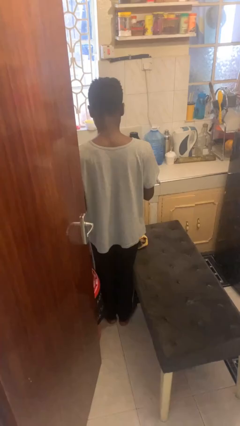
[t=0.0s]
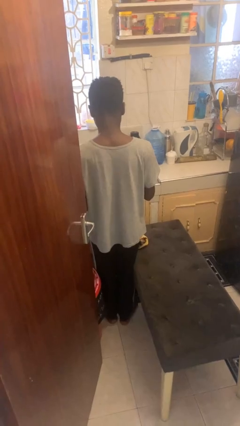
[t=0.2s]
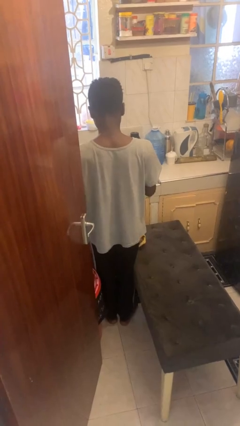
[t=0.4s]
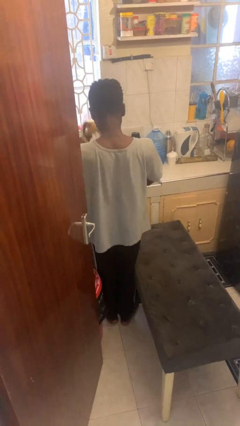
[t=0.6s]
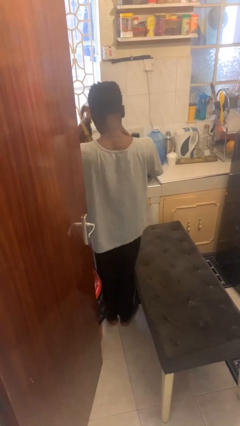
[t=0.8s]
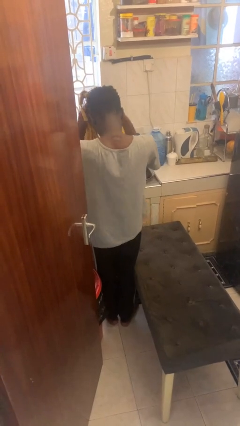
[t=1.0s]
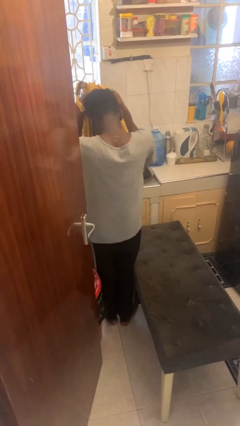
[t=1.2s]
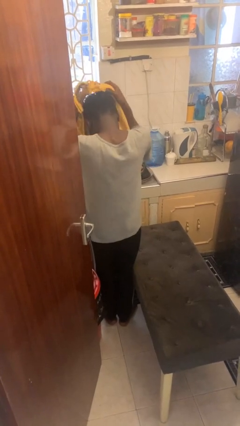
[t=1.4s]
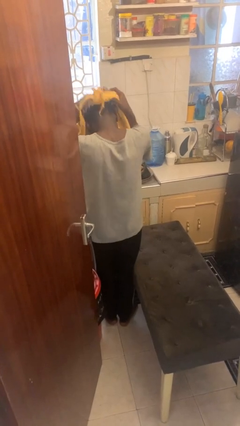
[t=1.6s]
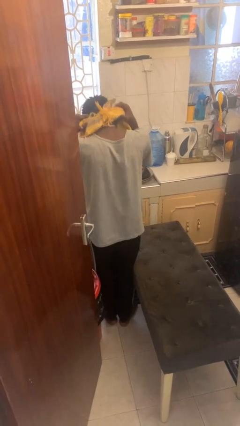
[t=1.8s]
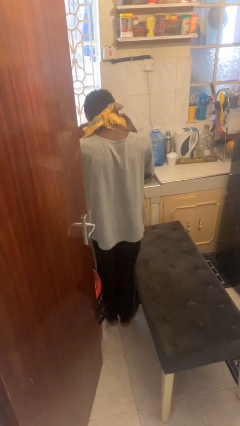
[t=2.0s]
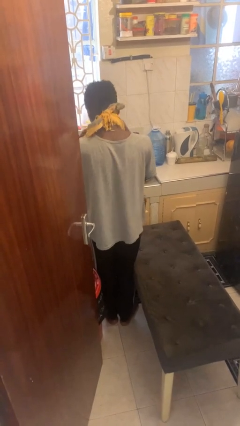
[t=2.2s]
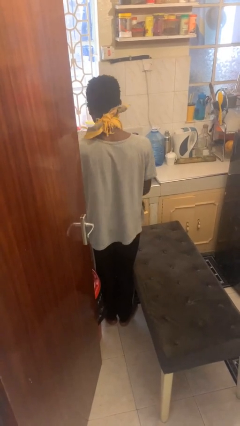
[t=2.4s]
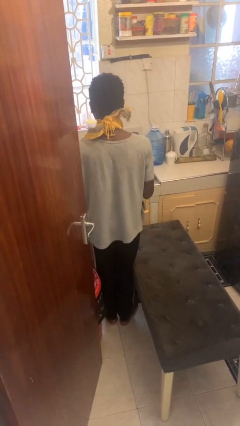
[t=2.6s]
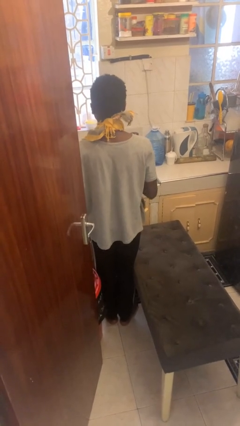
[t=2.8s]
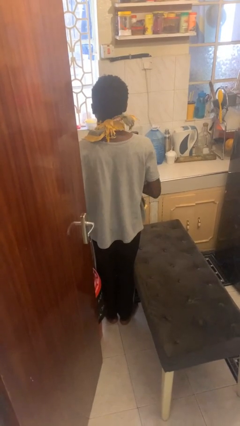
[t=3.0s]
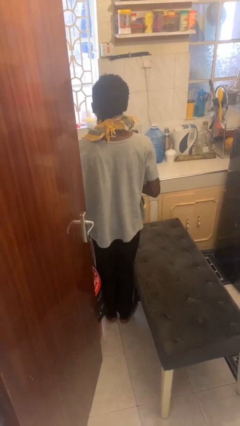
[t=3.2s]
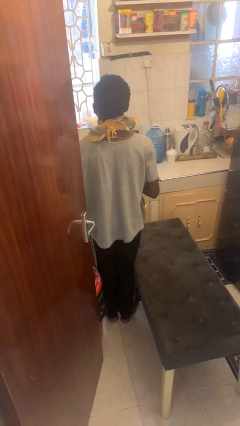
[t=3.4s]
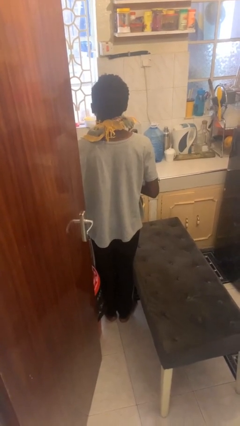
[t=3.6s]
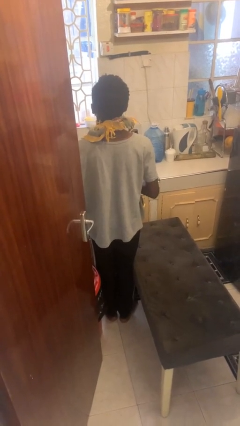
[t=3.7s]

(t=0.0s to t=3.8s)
person puts on apron

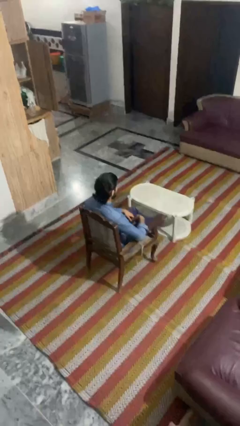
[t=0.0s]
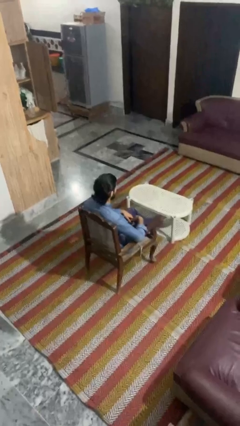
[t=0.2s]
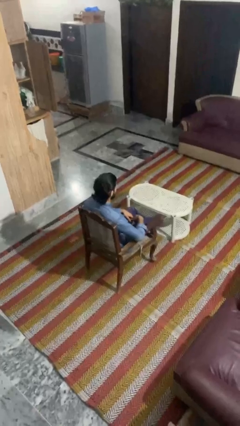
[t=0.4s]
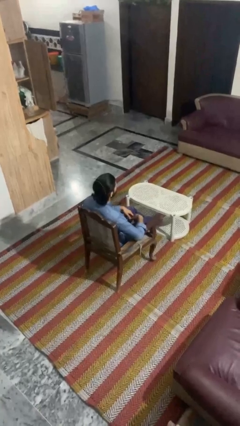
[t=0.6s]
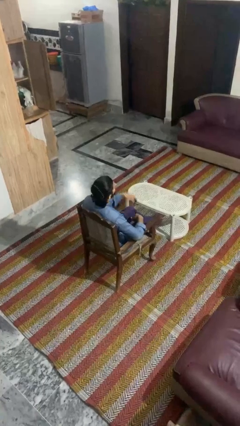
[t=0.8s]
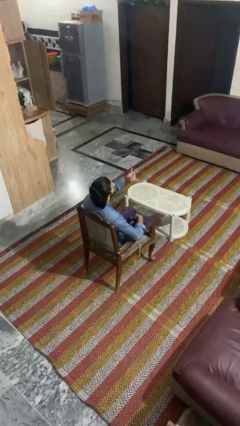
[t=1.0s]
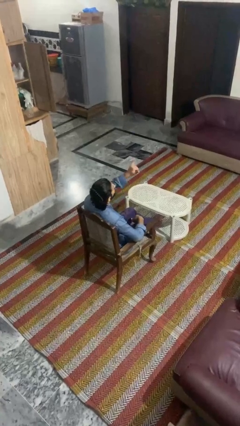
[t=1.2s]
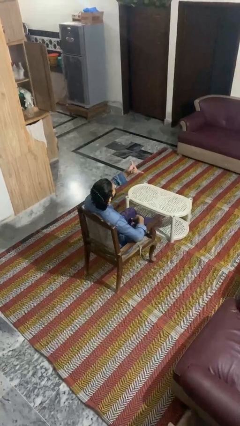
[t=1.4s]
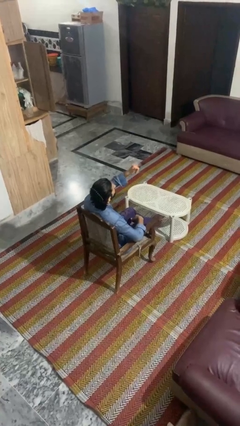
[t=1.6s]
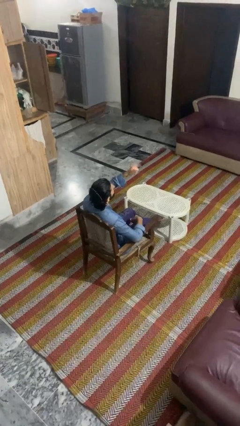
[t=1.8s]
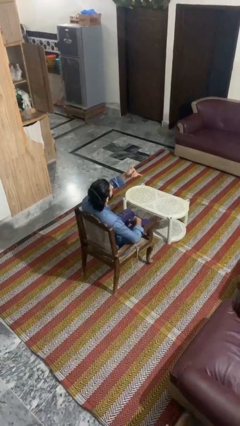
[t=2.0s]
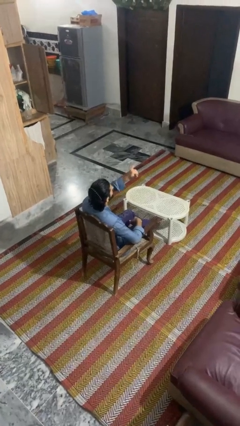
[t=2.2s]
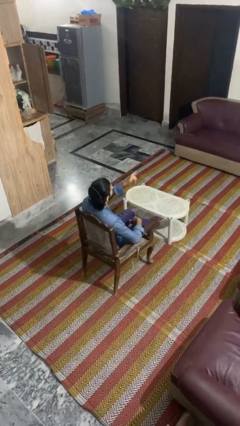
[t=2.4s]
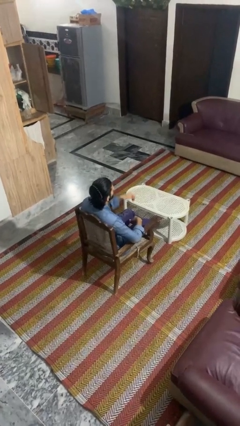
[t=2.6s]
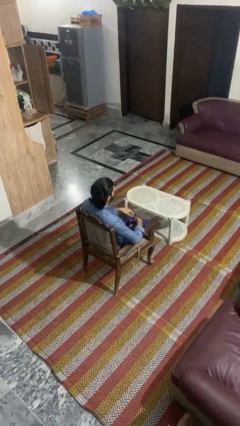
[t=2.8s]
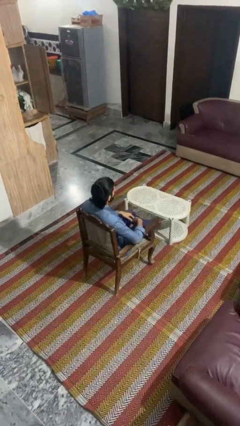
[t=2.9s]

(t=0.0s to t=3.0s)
person gestures hang loose

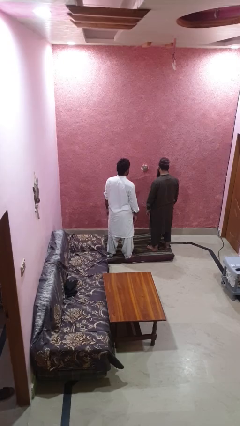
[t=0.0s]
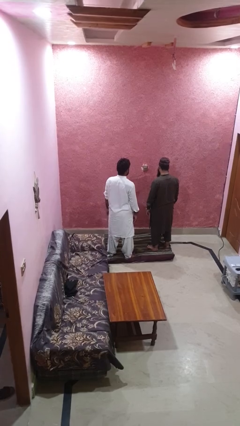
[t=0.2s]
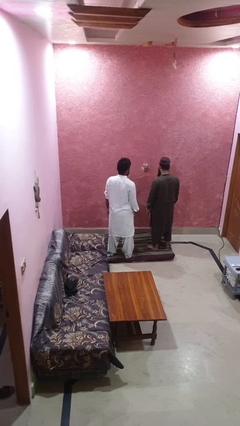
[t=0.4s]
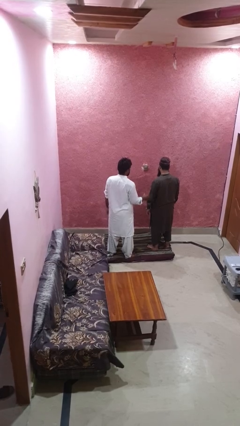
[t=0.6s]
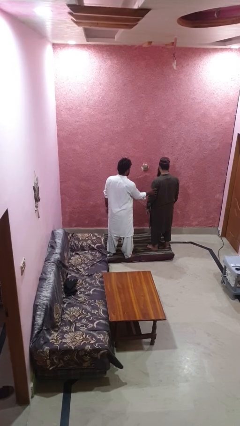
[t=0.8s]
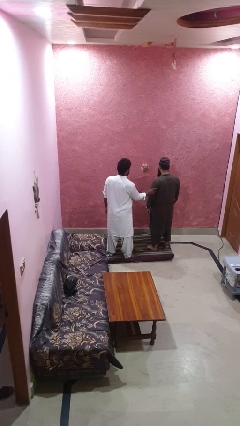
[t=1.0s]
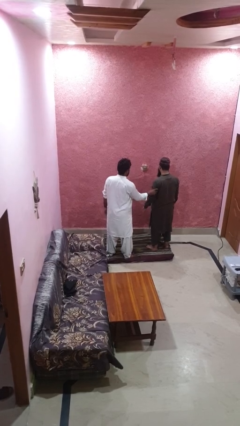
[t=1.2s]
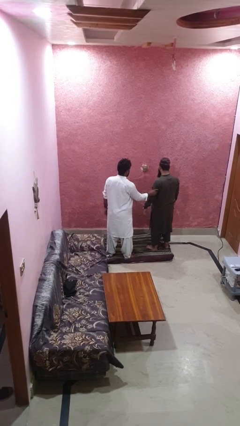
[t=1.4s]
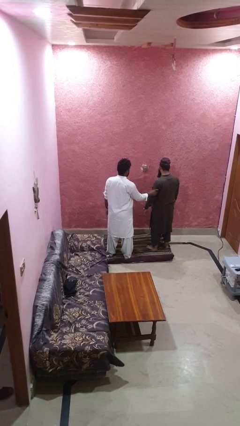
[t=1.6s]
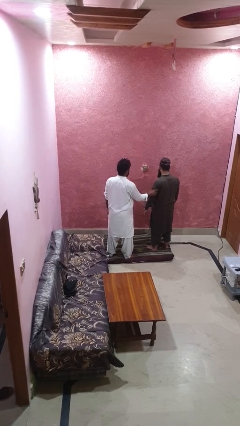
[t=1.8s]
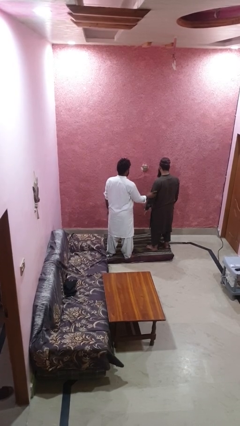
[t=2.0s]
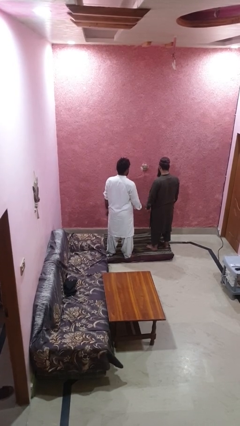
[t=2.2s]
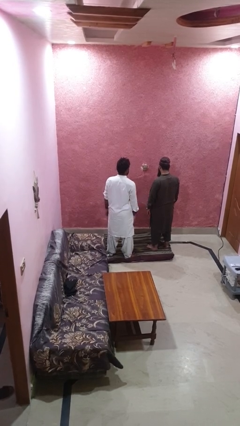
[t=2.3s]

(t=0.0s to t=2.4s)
person grabs person by bicep

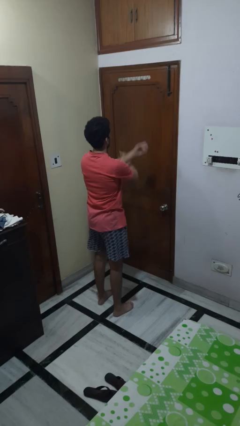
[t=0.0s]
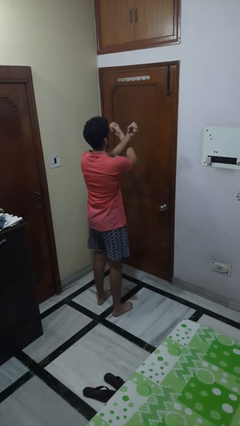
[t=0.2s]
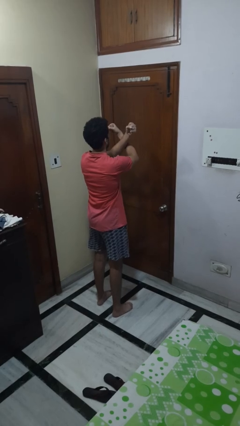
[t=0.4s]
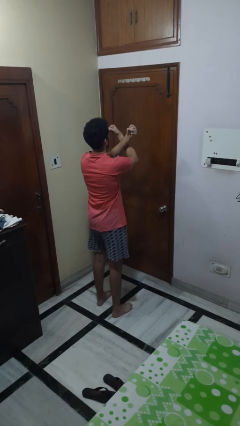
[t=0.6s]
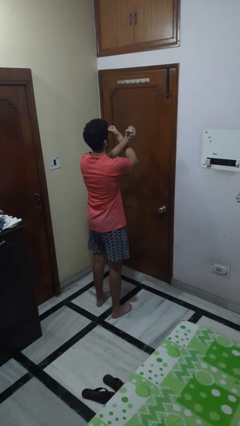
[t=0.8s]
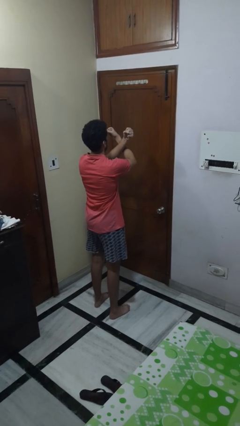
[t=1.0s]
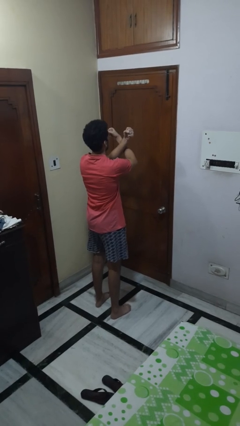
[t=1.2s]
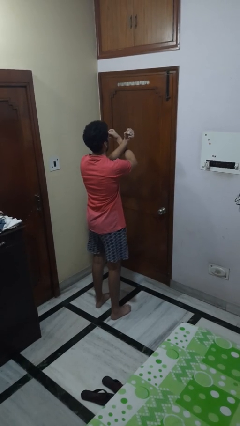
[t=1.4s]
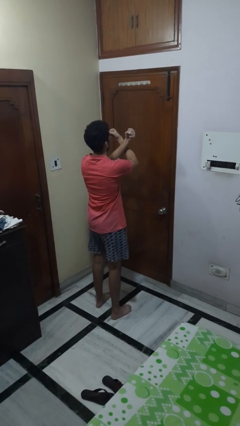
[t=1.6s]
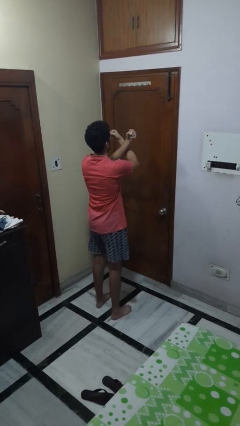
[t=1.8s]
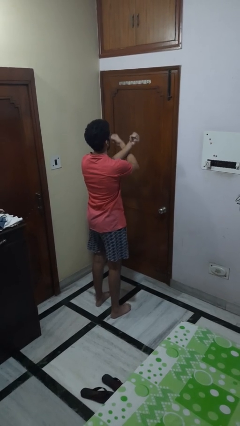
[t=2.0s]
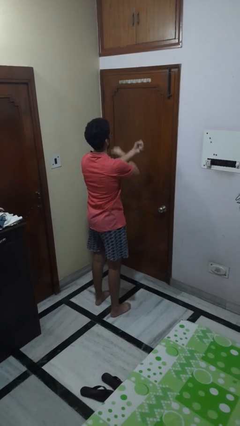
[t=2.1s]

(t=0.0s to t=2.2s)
person gestures arms x

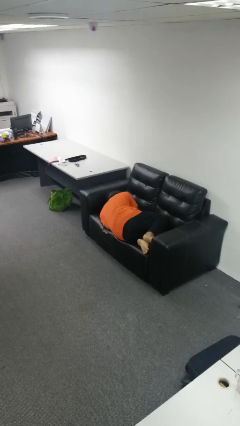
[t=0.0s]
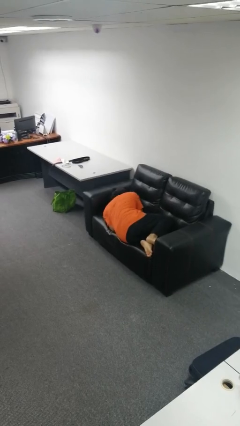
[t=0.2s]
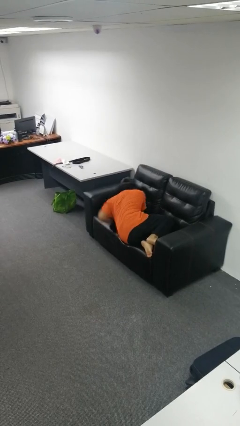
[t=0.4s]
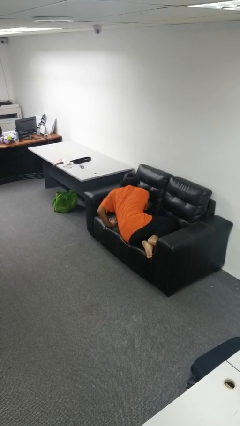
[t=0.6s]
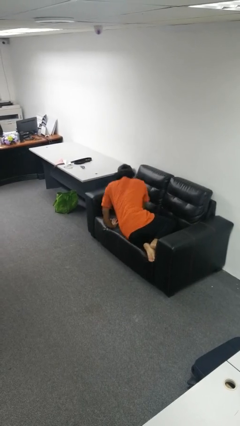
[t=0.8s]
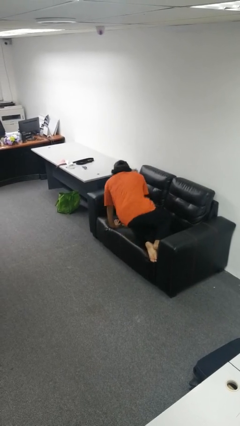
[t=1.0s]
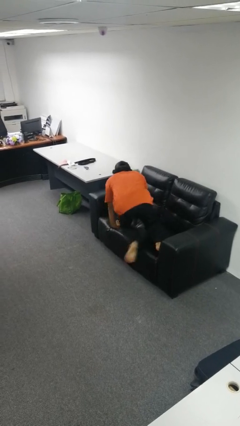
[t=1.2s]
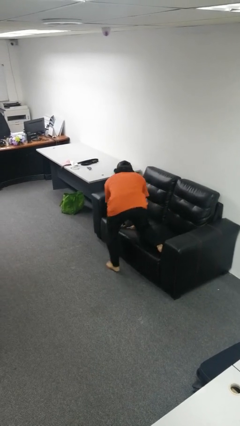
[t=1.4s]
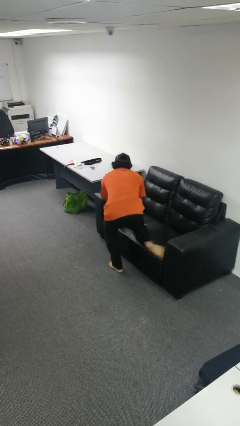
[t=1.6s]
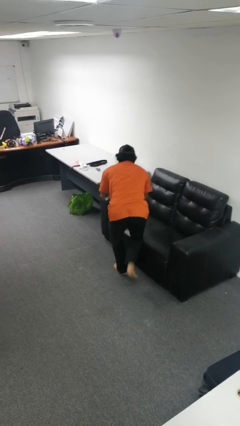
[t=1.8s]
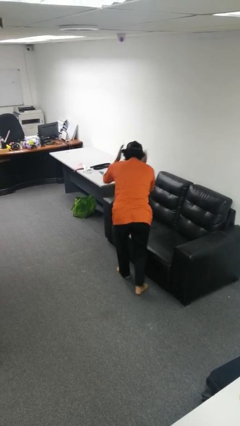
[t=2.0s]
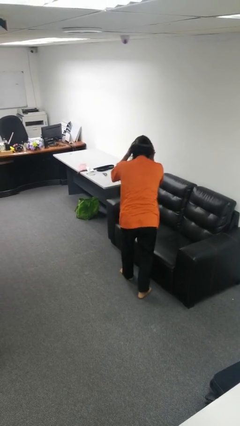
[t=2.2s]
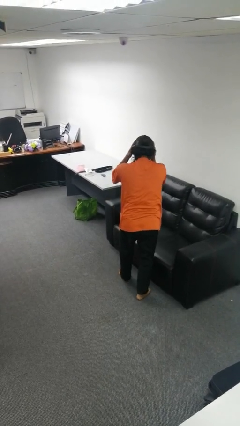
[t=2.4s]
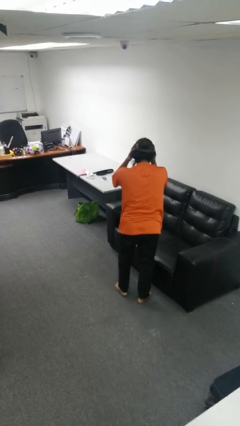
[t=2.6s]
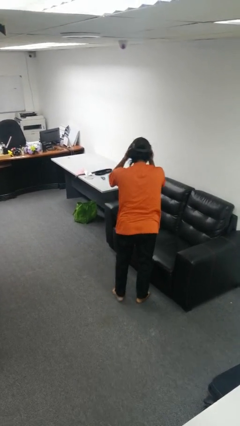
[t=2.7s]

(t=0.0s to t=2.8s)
person stands up

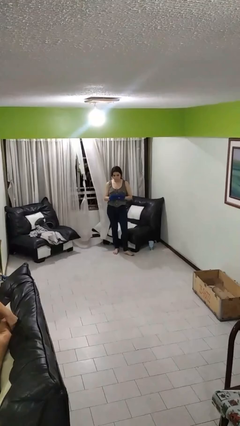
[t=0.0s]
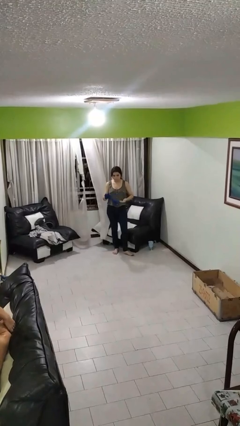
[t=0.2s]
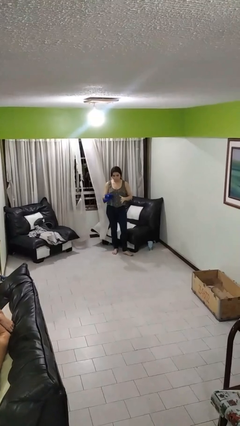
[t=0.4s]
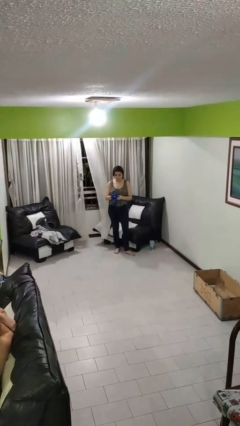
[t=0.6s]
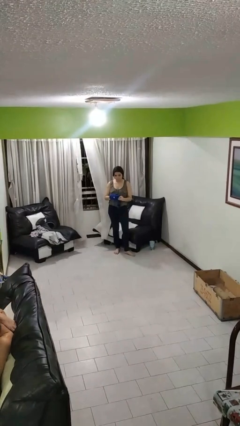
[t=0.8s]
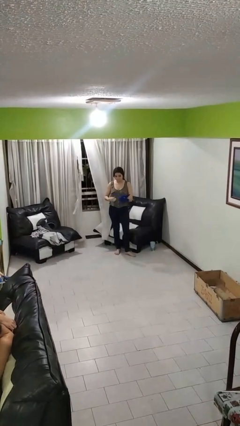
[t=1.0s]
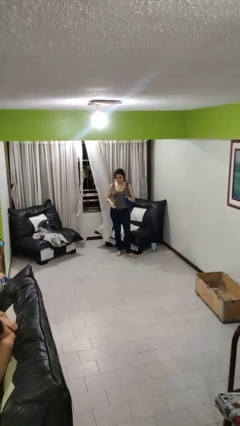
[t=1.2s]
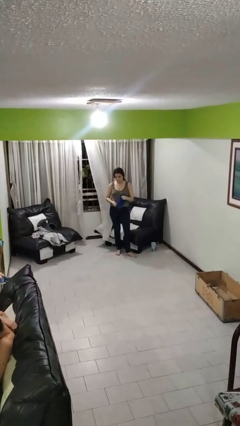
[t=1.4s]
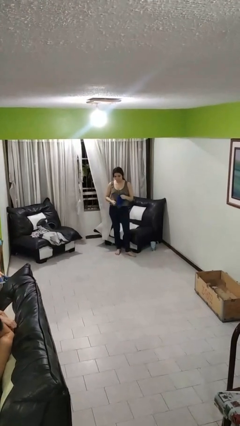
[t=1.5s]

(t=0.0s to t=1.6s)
person takes off gloves

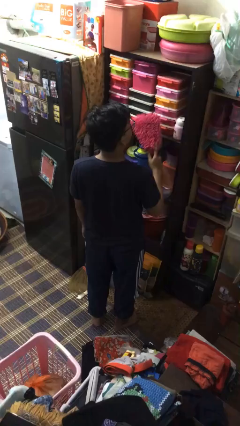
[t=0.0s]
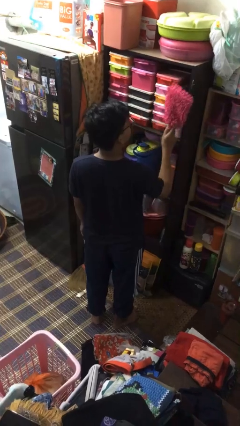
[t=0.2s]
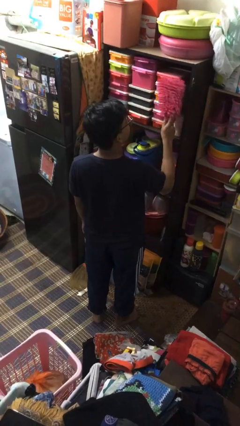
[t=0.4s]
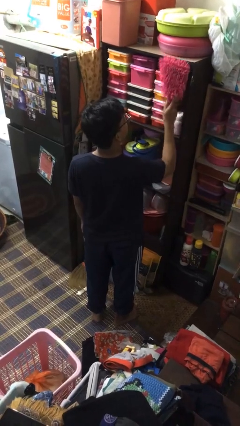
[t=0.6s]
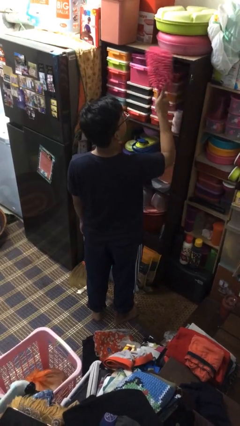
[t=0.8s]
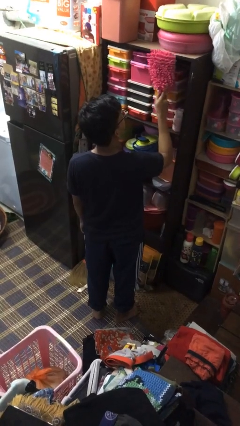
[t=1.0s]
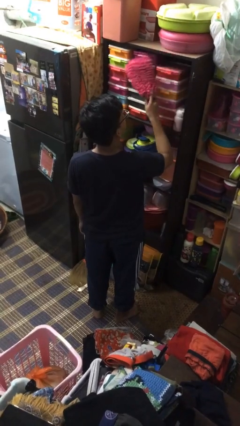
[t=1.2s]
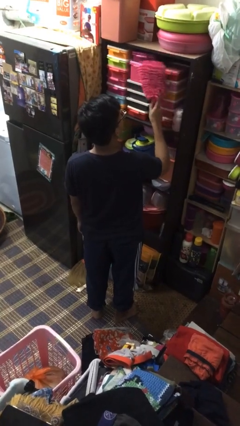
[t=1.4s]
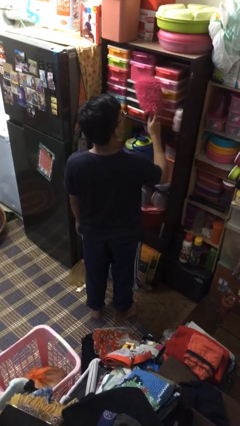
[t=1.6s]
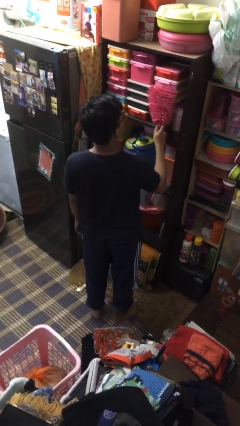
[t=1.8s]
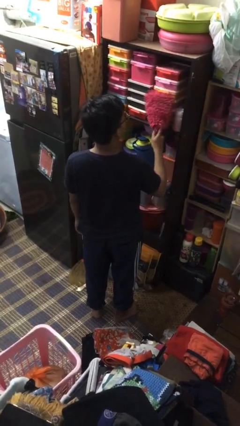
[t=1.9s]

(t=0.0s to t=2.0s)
person dusts furniture
